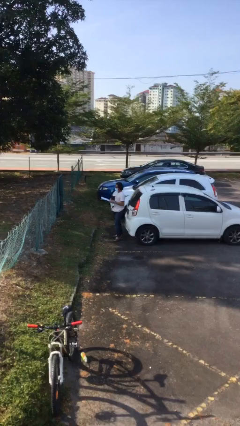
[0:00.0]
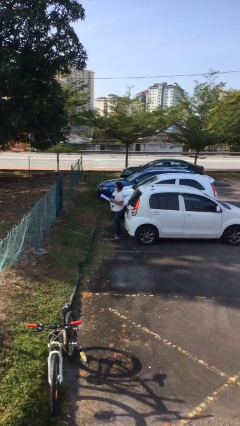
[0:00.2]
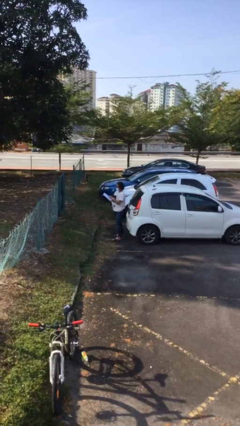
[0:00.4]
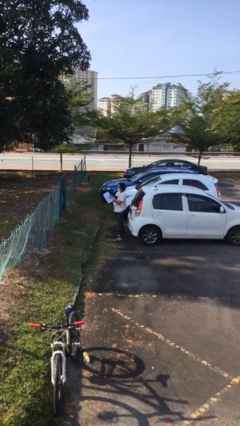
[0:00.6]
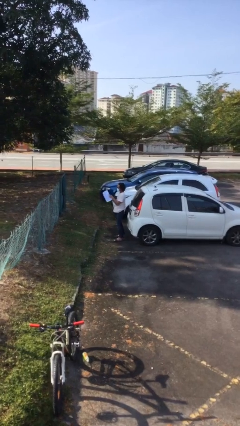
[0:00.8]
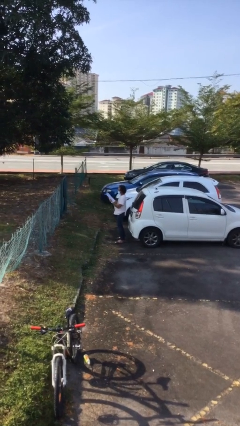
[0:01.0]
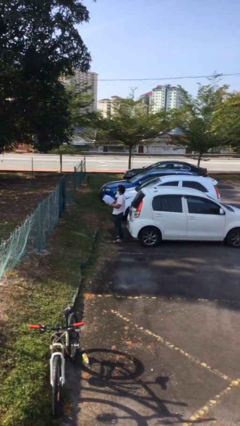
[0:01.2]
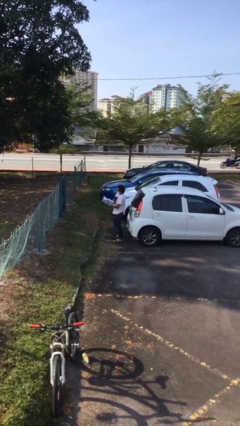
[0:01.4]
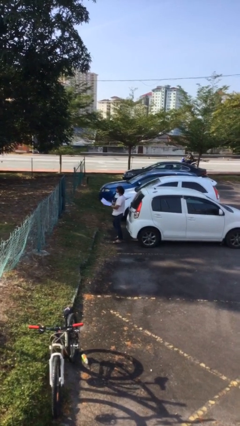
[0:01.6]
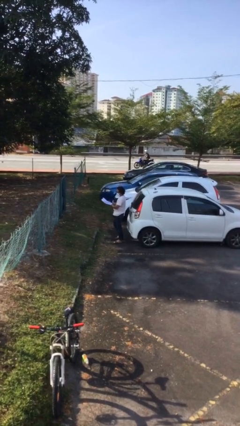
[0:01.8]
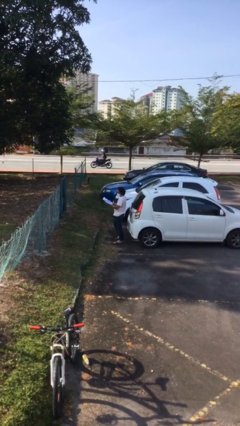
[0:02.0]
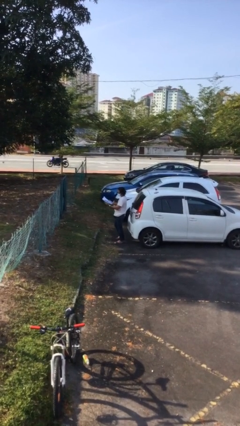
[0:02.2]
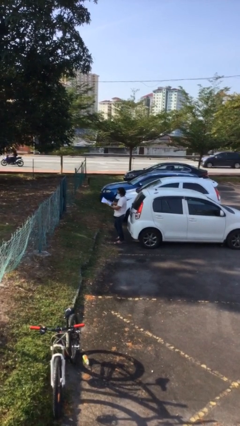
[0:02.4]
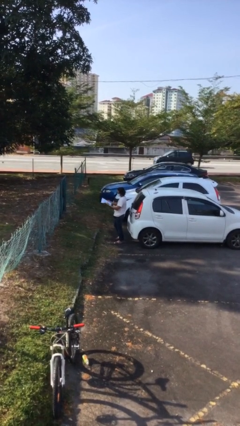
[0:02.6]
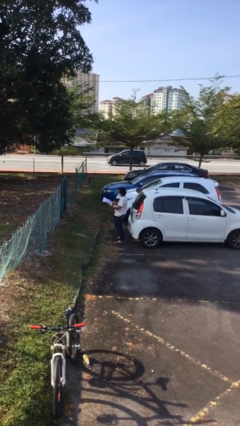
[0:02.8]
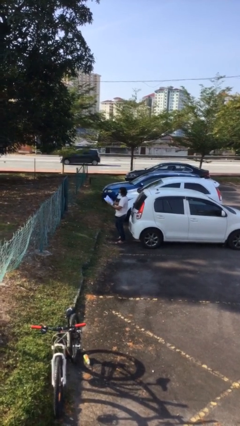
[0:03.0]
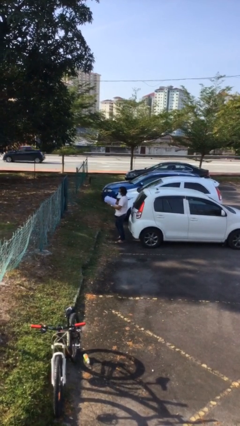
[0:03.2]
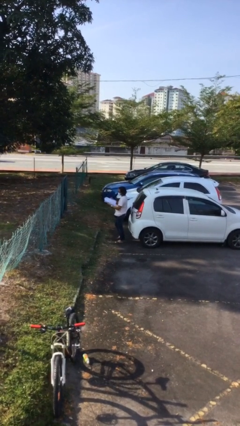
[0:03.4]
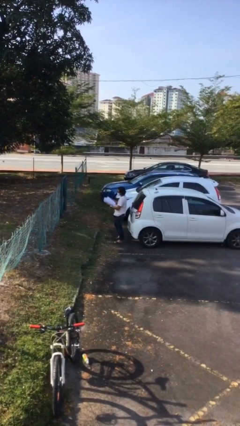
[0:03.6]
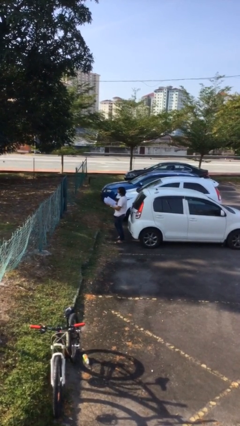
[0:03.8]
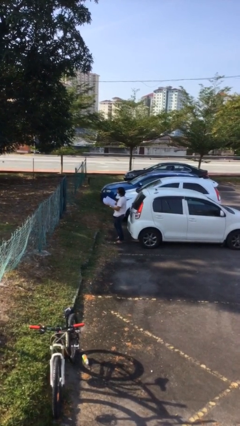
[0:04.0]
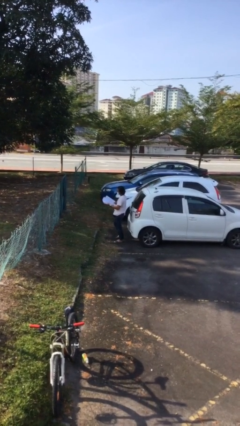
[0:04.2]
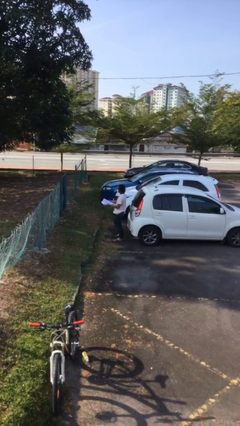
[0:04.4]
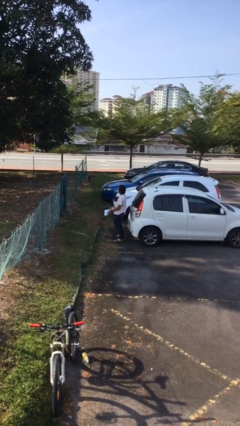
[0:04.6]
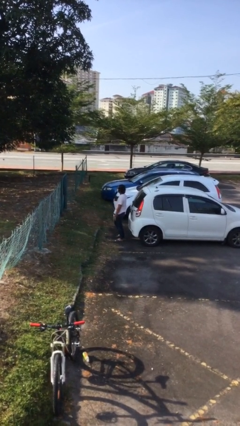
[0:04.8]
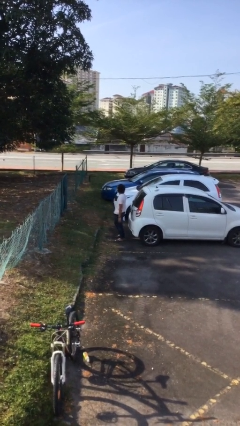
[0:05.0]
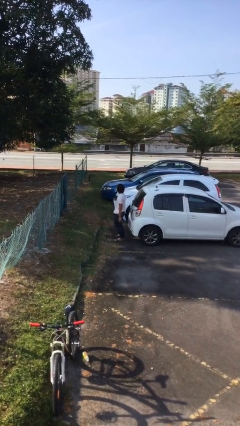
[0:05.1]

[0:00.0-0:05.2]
person reads document

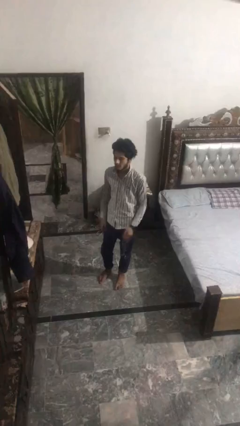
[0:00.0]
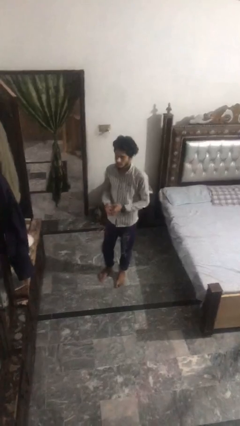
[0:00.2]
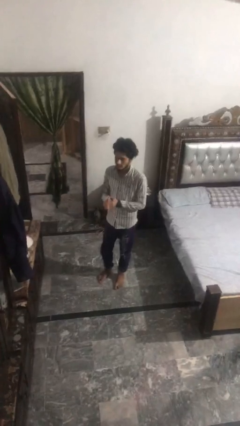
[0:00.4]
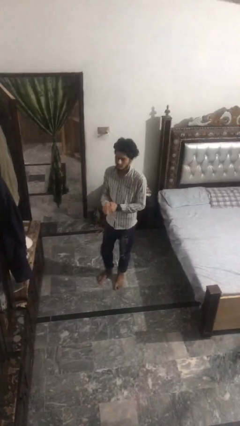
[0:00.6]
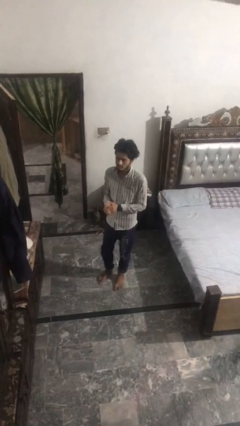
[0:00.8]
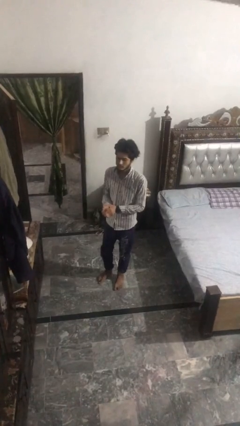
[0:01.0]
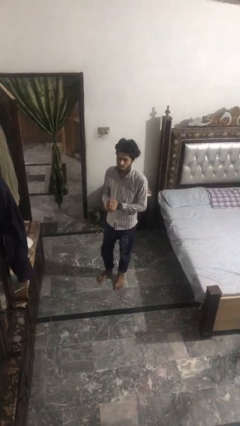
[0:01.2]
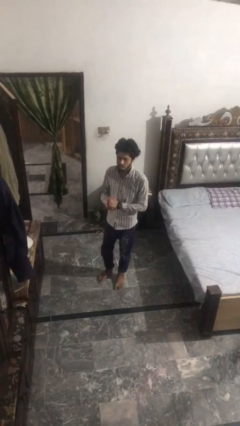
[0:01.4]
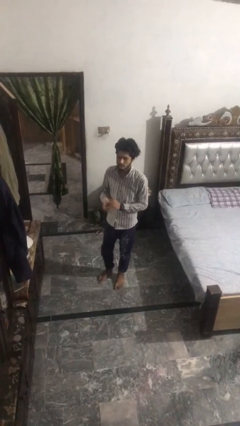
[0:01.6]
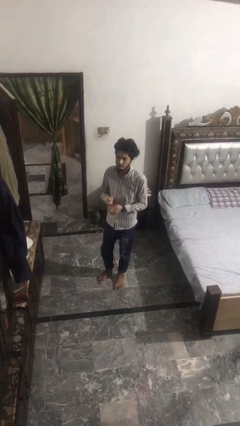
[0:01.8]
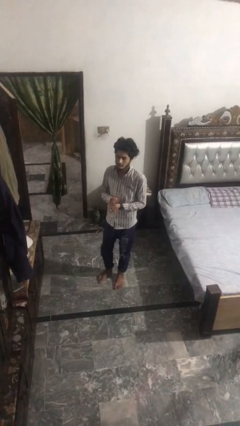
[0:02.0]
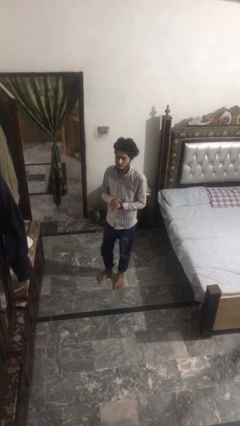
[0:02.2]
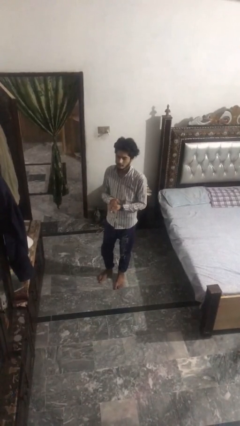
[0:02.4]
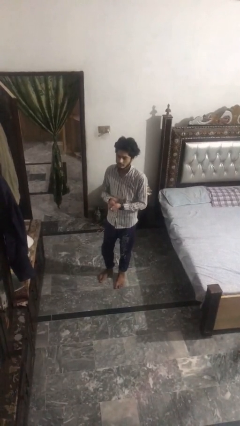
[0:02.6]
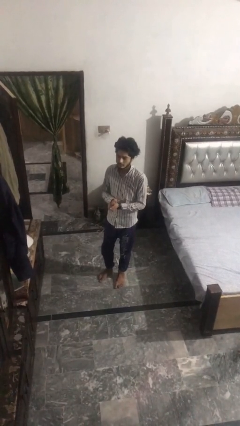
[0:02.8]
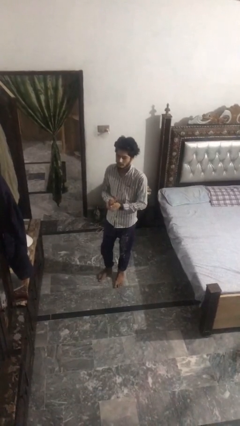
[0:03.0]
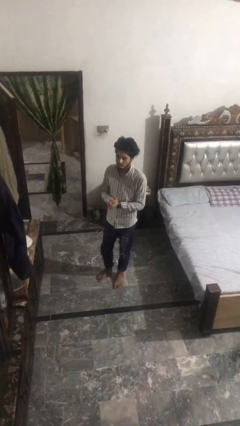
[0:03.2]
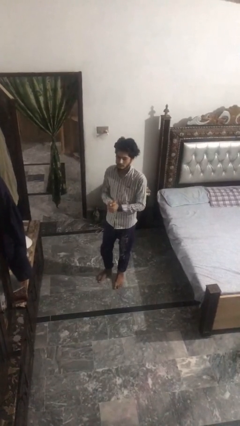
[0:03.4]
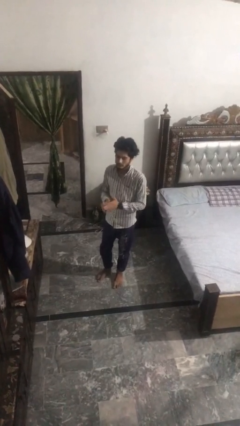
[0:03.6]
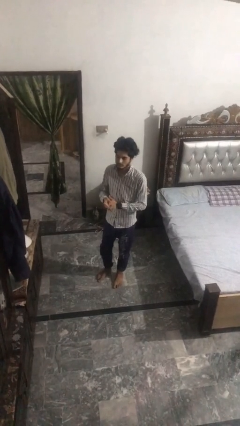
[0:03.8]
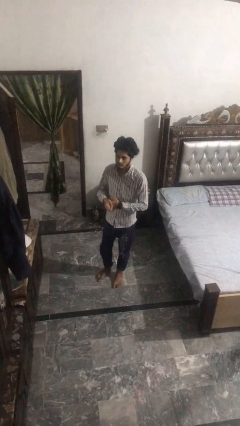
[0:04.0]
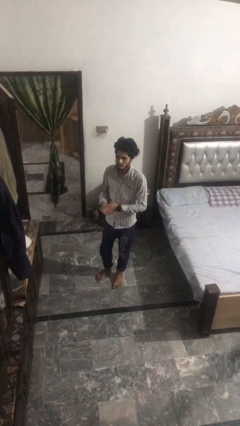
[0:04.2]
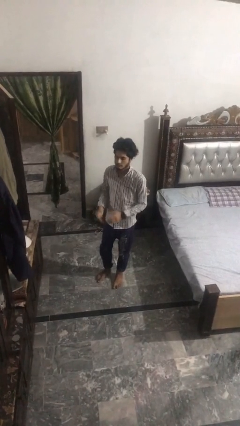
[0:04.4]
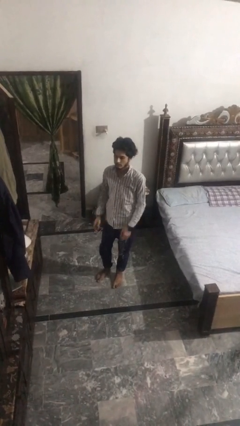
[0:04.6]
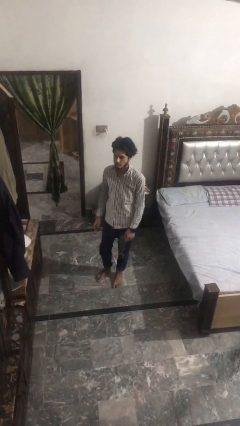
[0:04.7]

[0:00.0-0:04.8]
person cracks knuckles

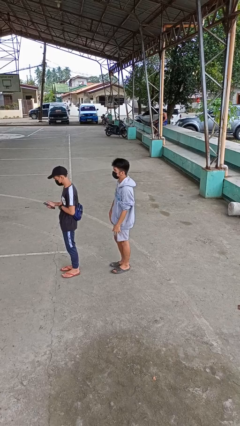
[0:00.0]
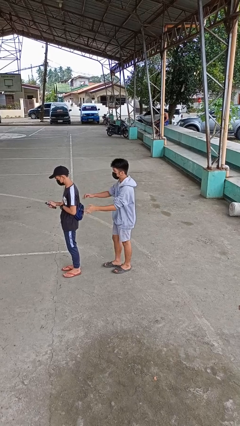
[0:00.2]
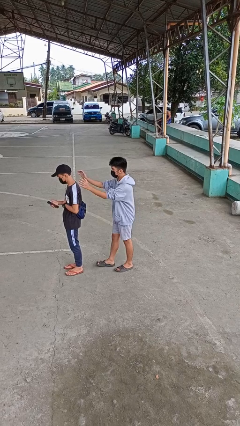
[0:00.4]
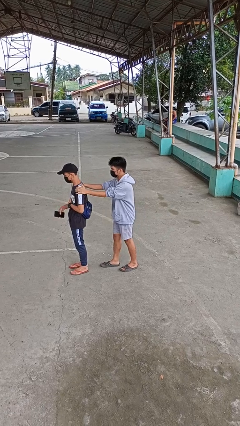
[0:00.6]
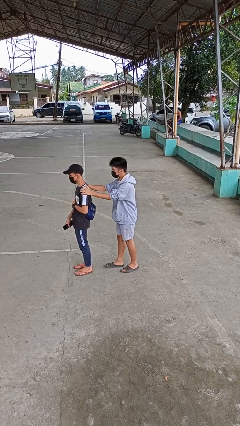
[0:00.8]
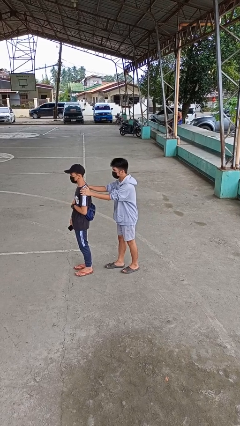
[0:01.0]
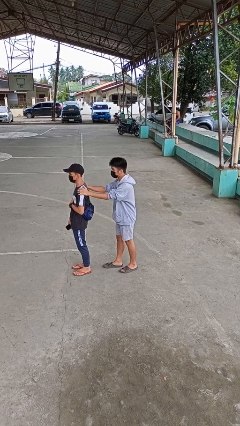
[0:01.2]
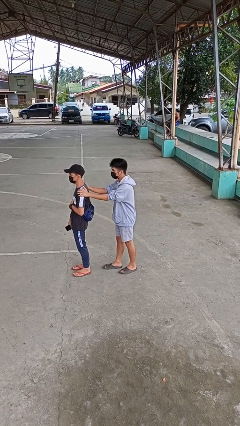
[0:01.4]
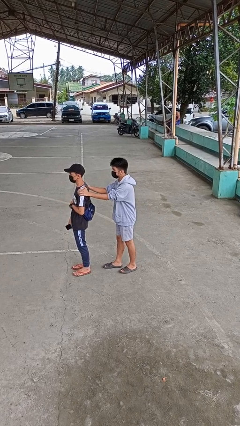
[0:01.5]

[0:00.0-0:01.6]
person grabs person by shoulder

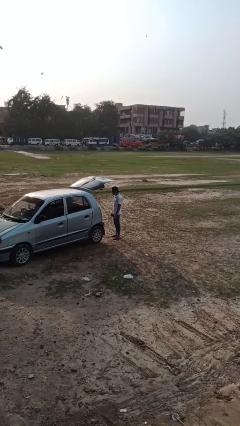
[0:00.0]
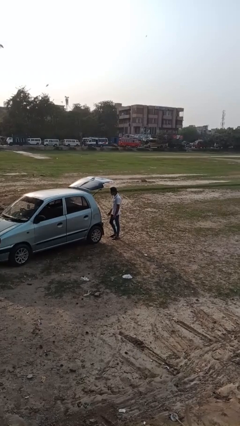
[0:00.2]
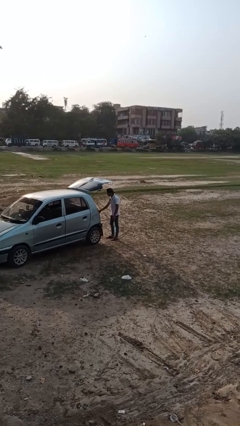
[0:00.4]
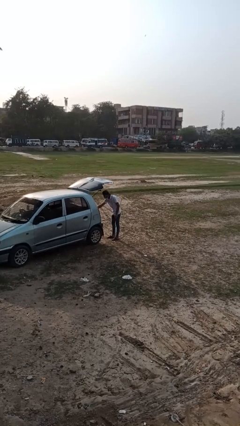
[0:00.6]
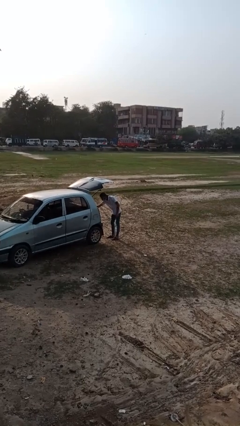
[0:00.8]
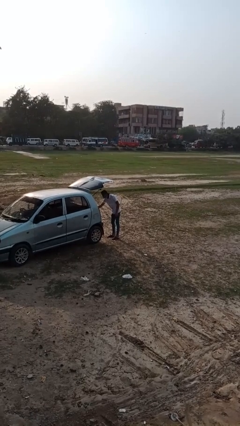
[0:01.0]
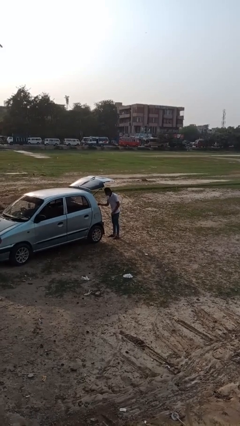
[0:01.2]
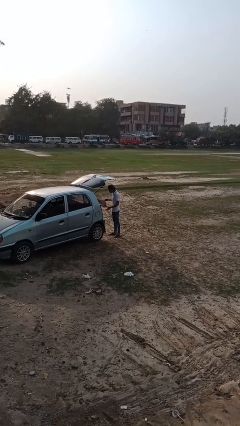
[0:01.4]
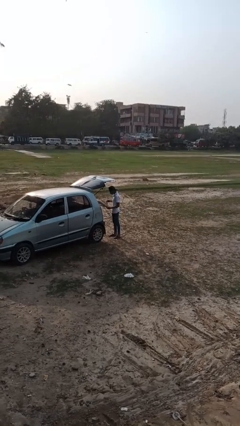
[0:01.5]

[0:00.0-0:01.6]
person unloads car

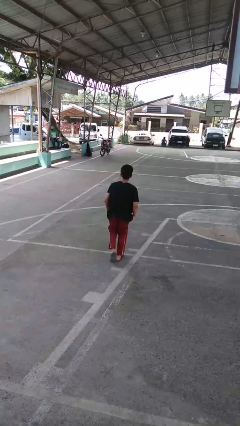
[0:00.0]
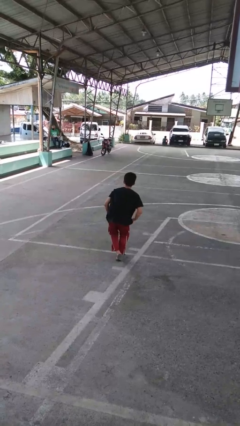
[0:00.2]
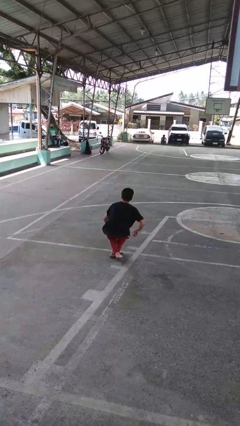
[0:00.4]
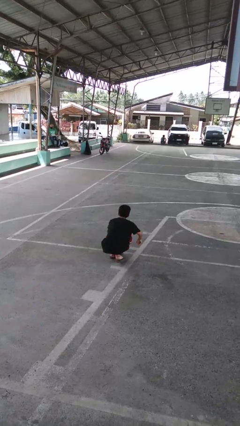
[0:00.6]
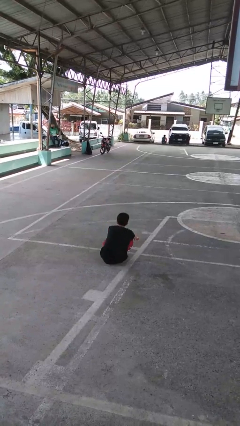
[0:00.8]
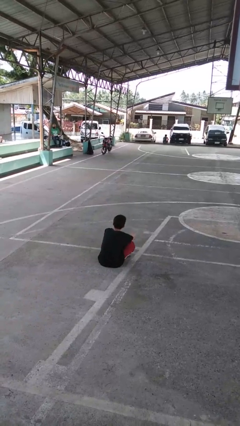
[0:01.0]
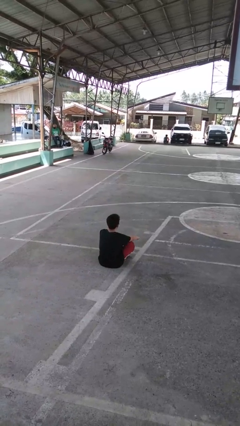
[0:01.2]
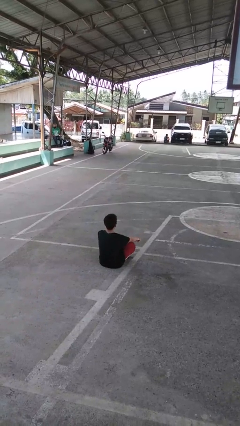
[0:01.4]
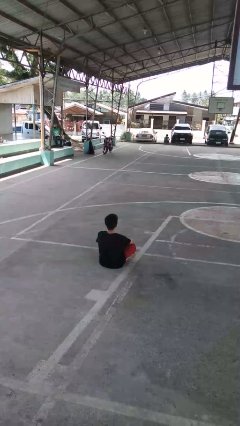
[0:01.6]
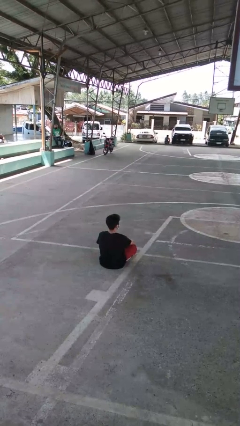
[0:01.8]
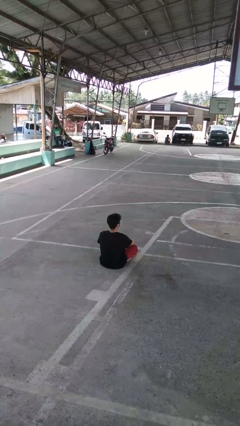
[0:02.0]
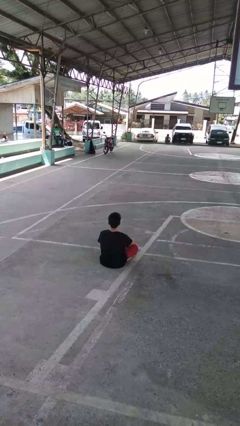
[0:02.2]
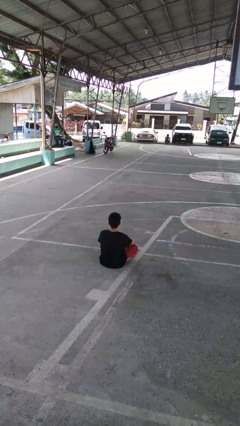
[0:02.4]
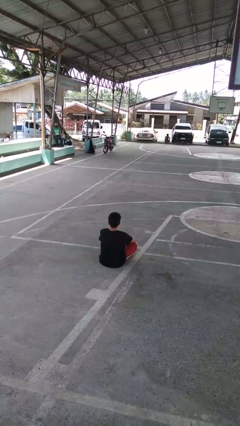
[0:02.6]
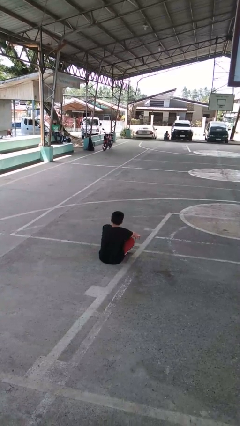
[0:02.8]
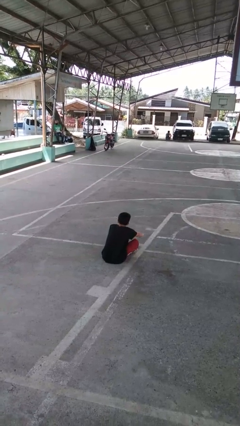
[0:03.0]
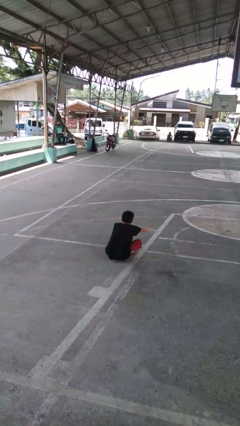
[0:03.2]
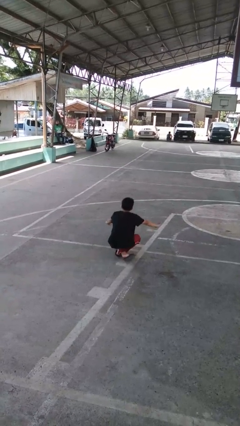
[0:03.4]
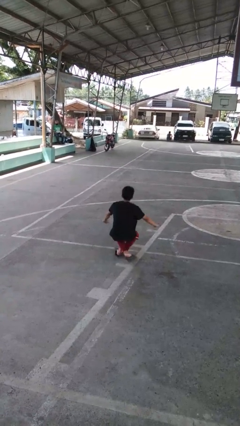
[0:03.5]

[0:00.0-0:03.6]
person sits crisscross

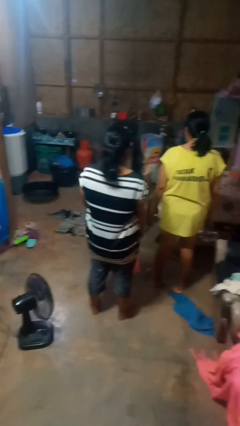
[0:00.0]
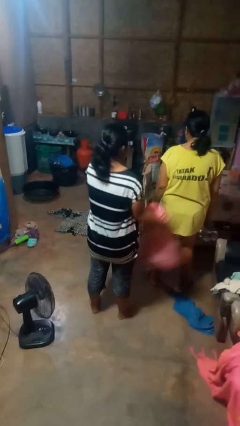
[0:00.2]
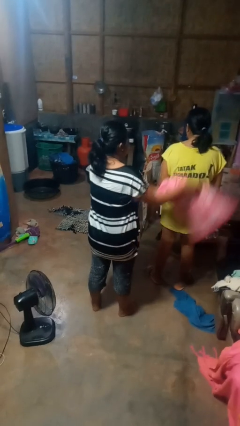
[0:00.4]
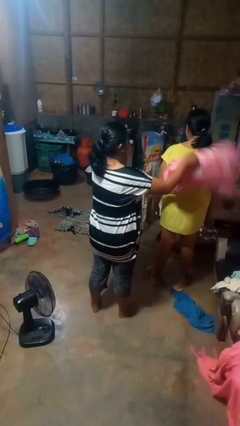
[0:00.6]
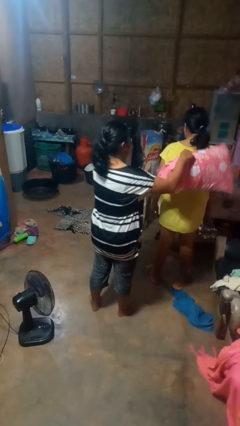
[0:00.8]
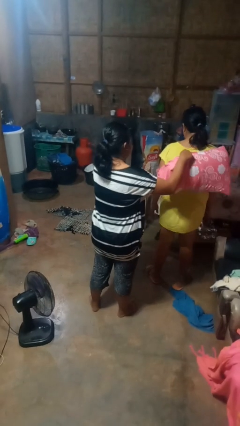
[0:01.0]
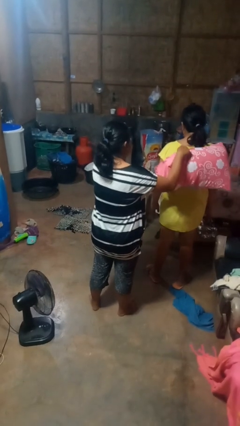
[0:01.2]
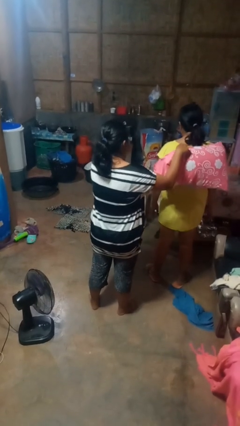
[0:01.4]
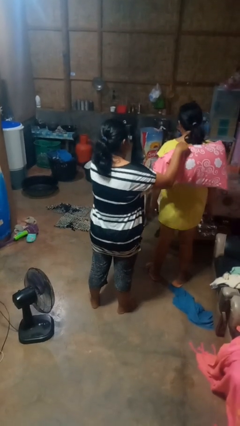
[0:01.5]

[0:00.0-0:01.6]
person hits person with pillow
